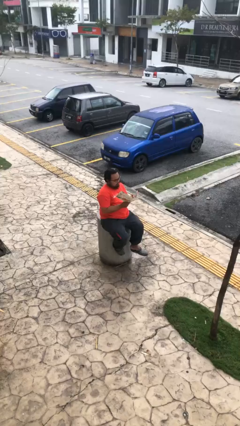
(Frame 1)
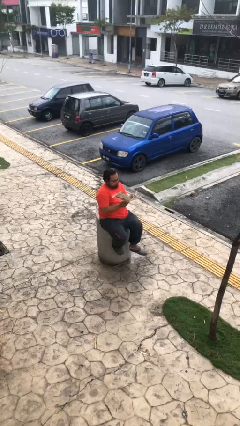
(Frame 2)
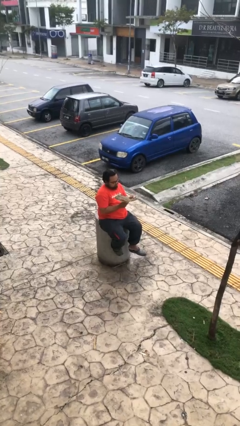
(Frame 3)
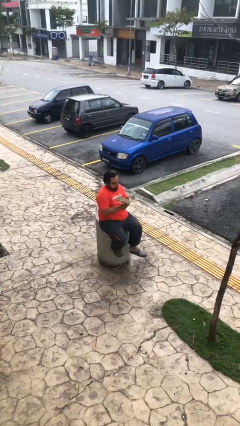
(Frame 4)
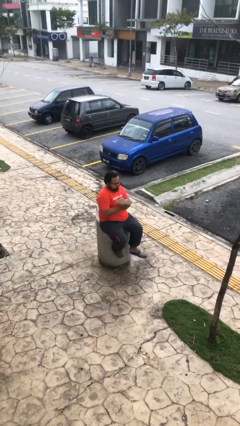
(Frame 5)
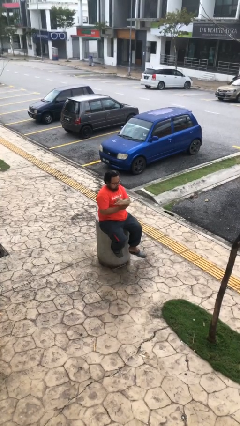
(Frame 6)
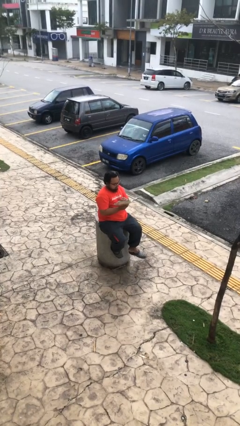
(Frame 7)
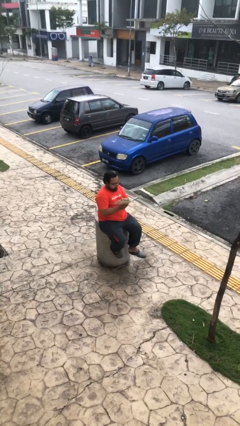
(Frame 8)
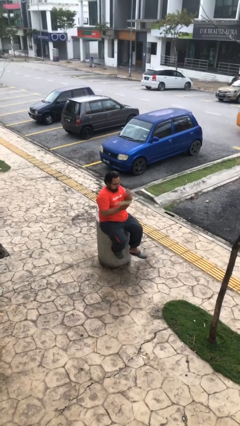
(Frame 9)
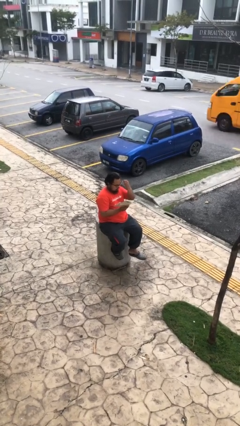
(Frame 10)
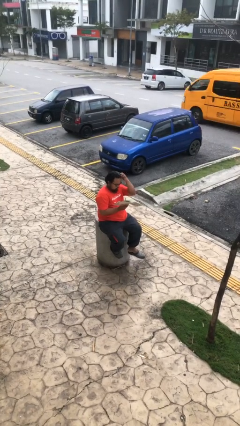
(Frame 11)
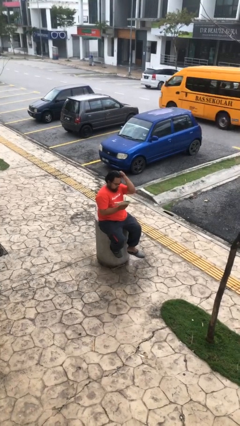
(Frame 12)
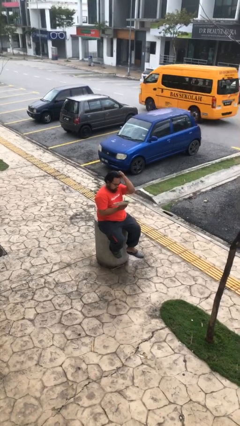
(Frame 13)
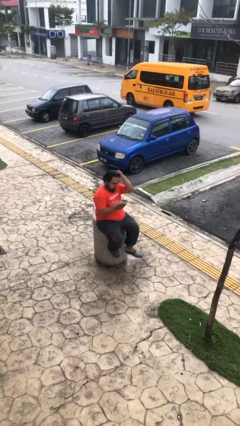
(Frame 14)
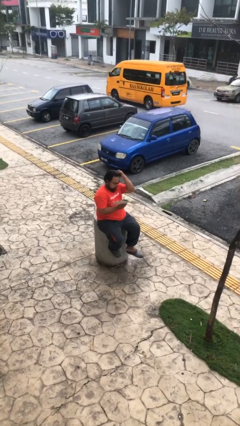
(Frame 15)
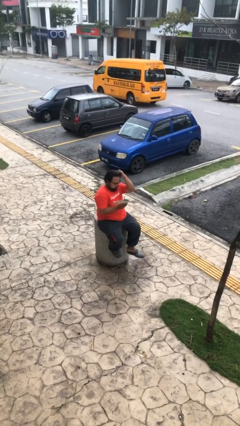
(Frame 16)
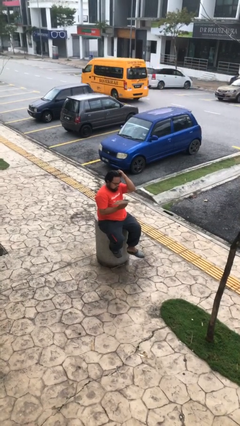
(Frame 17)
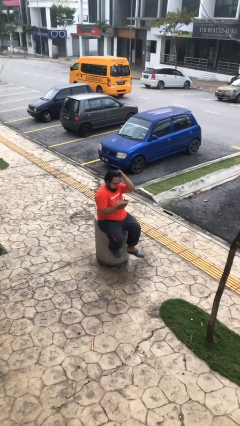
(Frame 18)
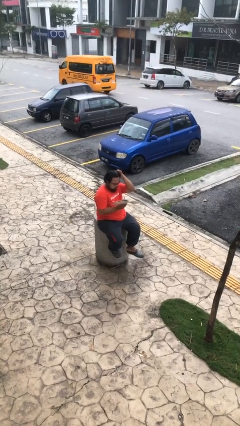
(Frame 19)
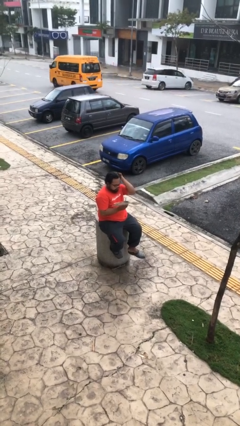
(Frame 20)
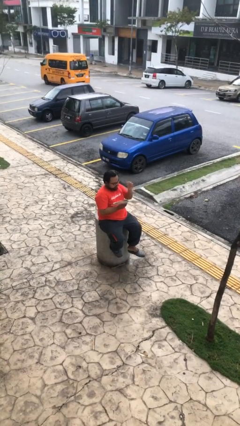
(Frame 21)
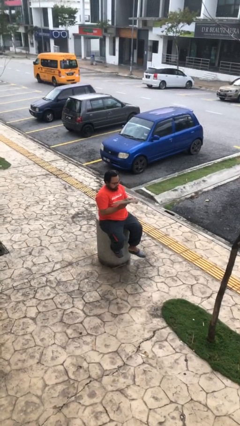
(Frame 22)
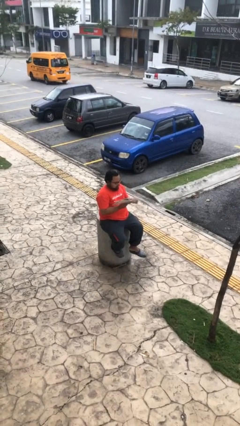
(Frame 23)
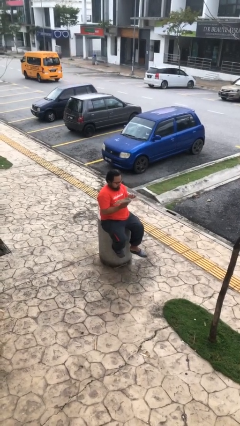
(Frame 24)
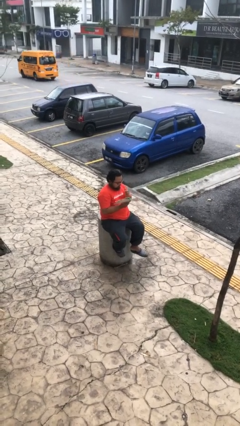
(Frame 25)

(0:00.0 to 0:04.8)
person reads document

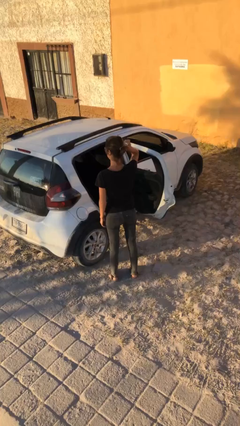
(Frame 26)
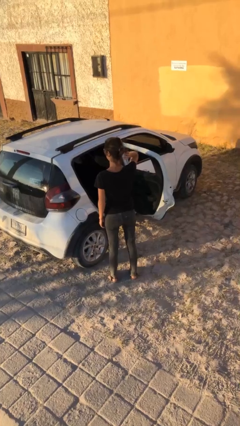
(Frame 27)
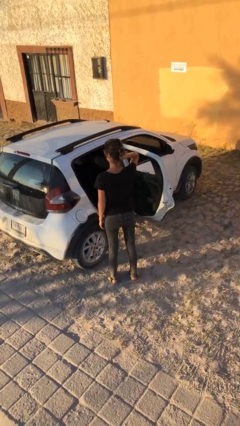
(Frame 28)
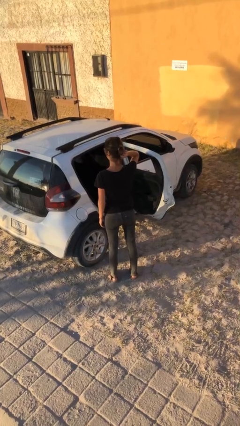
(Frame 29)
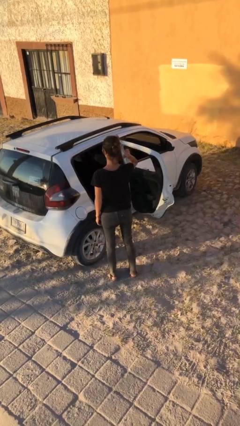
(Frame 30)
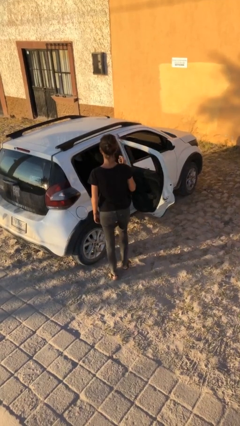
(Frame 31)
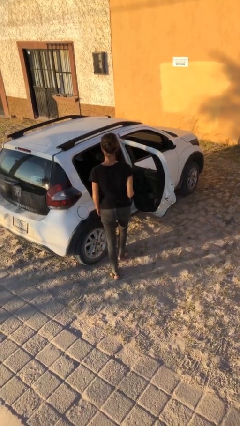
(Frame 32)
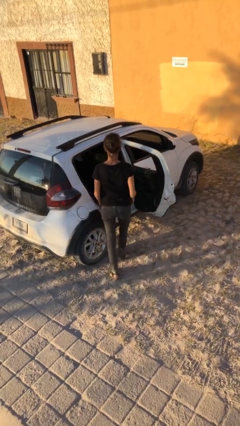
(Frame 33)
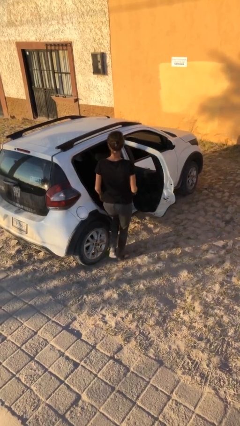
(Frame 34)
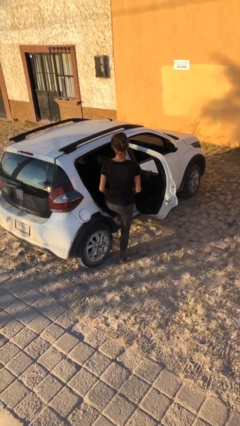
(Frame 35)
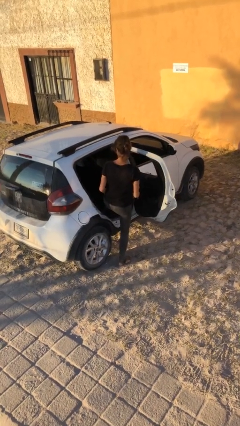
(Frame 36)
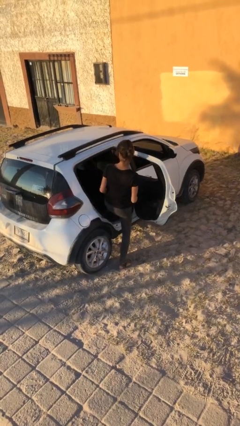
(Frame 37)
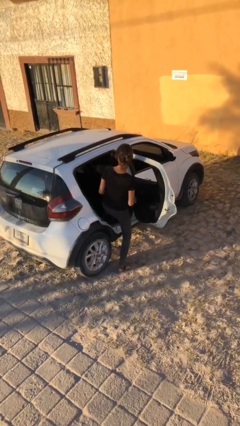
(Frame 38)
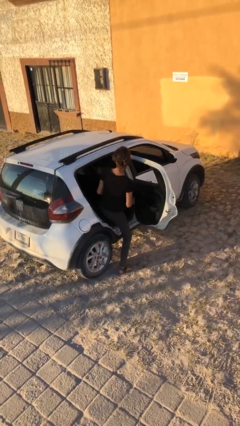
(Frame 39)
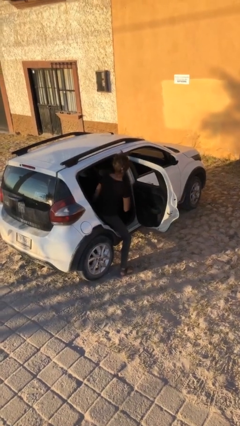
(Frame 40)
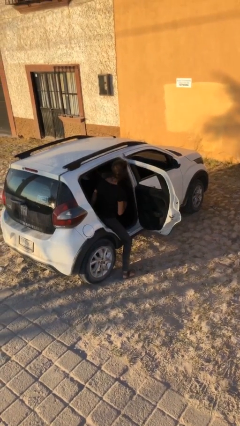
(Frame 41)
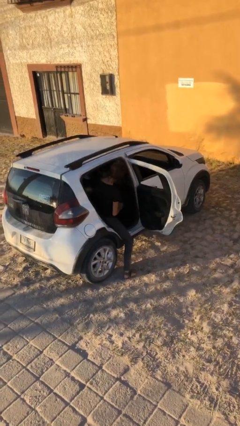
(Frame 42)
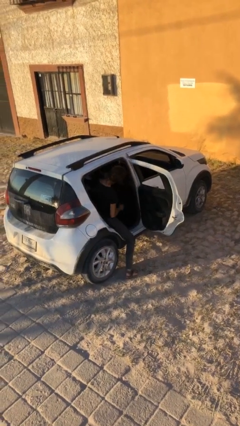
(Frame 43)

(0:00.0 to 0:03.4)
person enters car

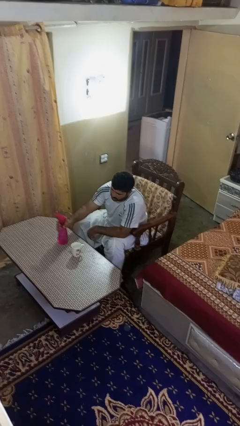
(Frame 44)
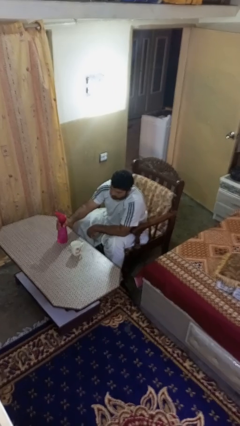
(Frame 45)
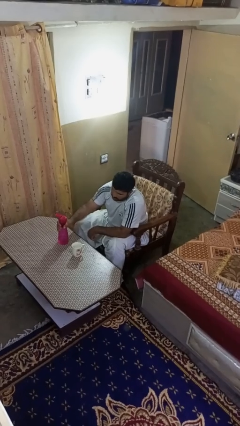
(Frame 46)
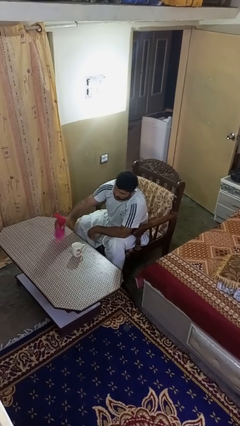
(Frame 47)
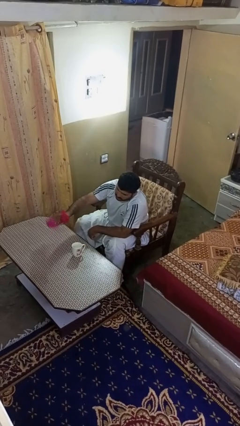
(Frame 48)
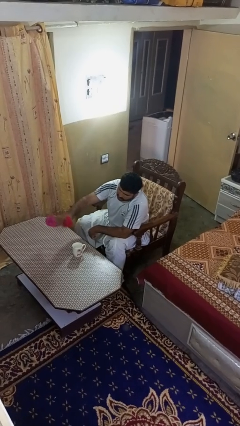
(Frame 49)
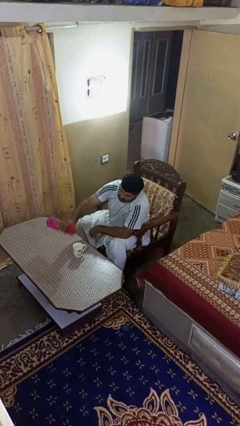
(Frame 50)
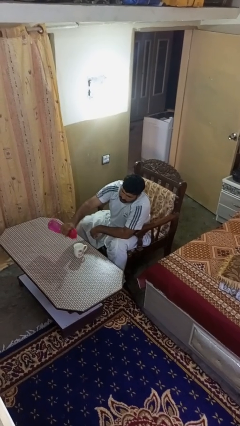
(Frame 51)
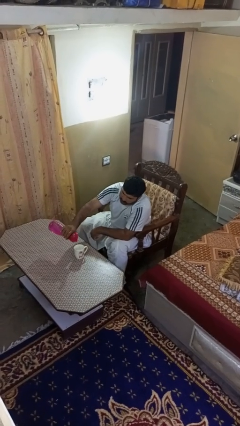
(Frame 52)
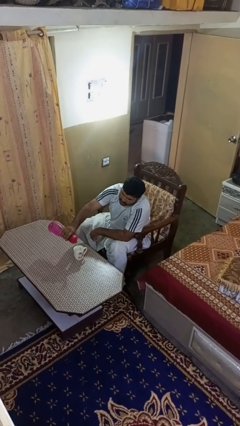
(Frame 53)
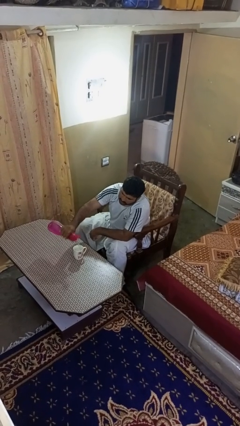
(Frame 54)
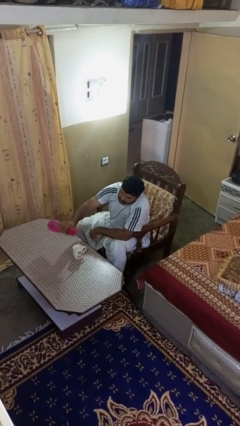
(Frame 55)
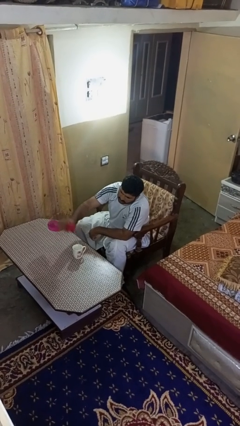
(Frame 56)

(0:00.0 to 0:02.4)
person pours liquid into cup

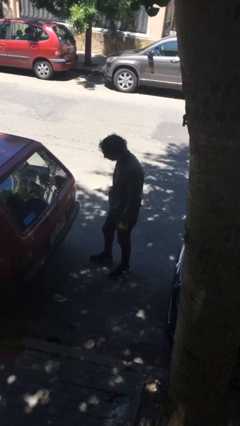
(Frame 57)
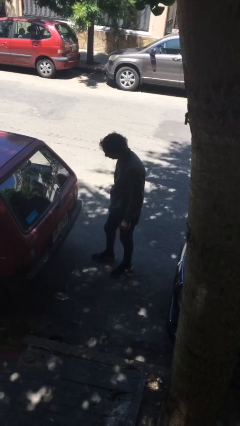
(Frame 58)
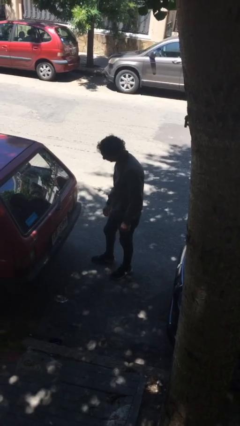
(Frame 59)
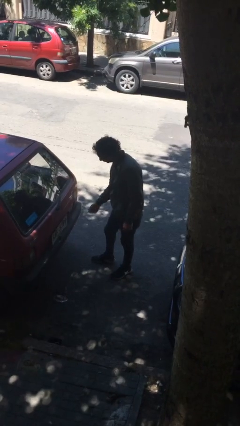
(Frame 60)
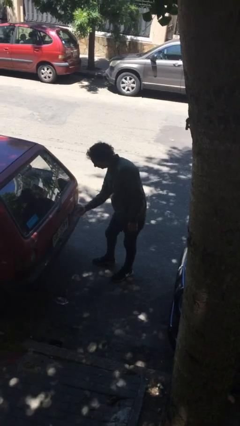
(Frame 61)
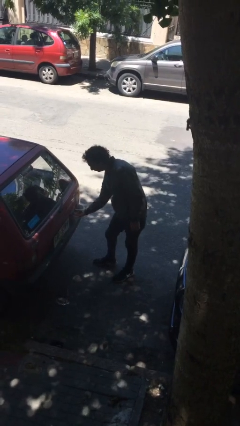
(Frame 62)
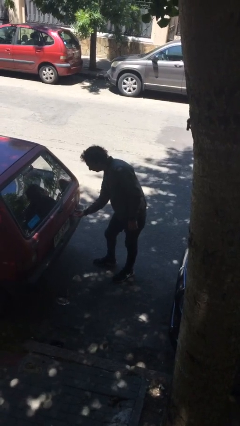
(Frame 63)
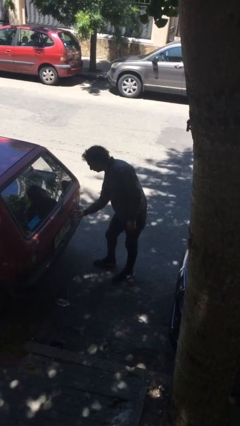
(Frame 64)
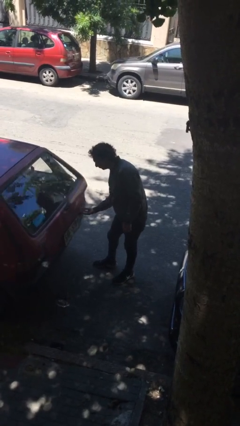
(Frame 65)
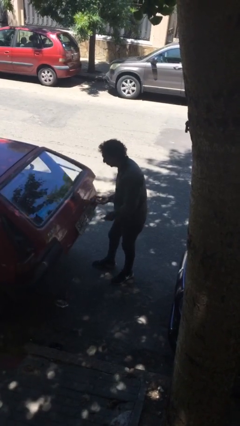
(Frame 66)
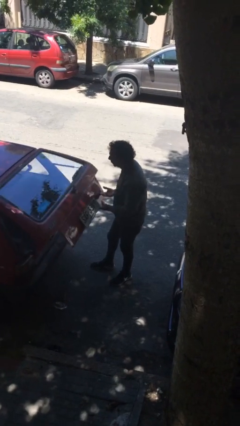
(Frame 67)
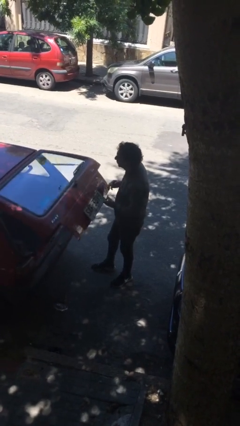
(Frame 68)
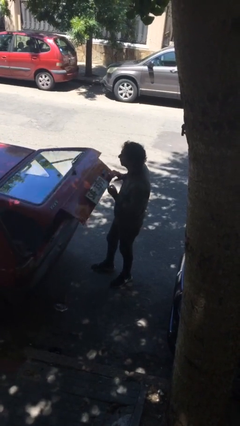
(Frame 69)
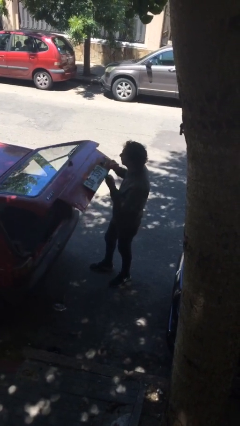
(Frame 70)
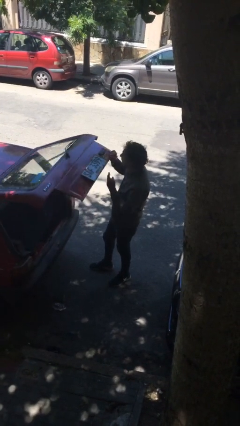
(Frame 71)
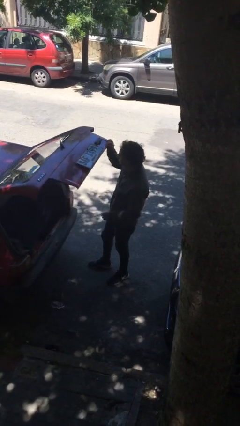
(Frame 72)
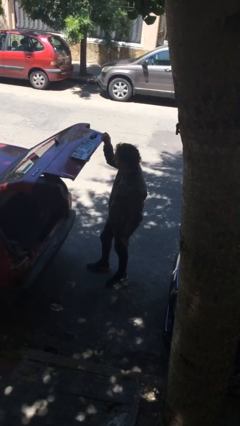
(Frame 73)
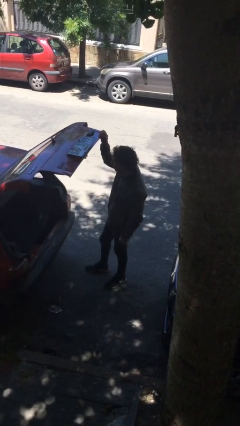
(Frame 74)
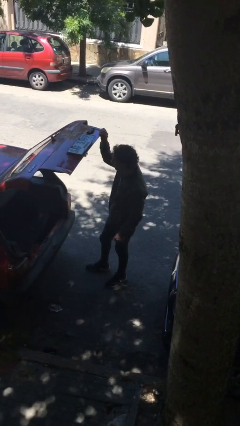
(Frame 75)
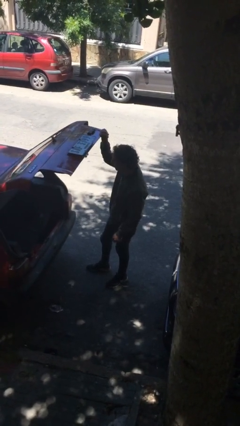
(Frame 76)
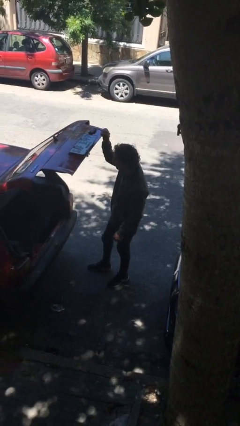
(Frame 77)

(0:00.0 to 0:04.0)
person opens car trunk

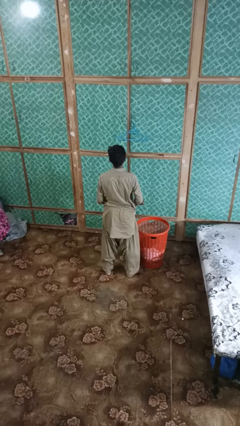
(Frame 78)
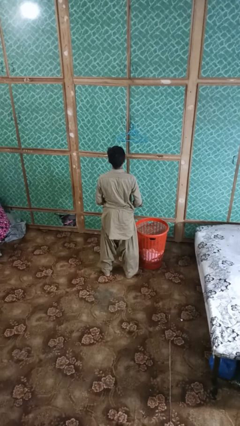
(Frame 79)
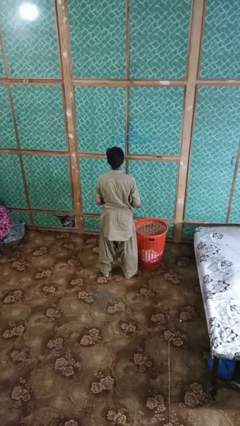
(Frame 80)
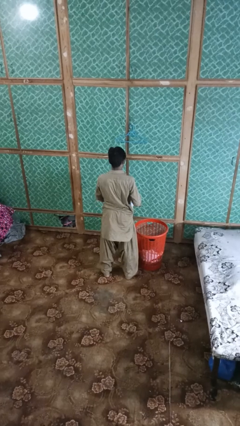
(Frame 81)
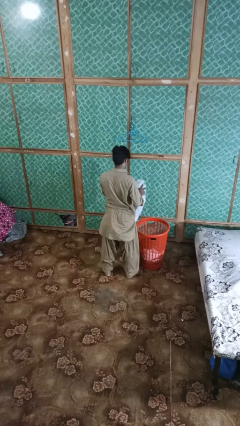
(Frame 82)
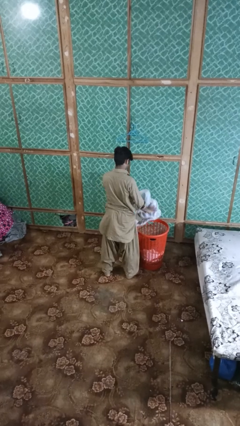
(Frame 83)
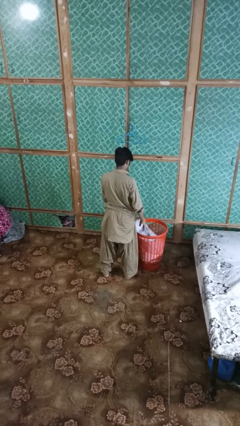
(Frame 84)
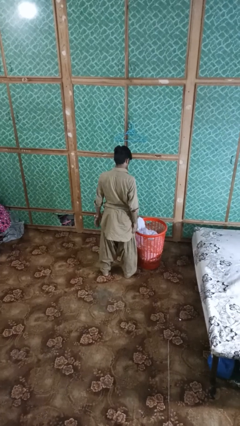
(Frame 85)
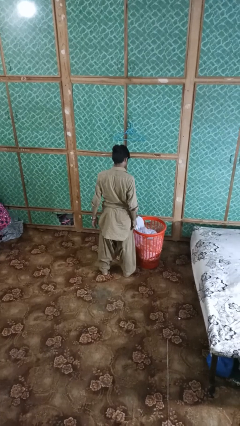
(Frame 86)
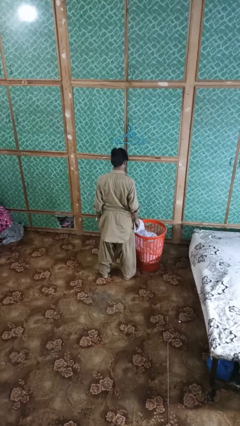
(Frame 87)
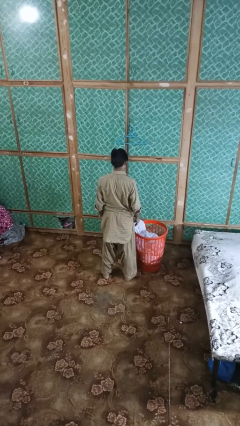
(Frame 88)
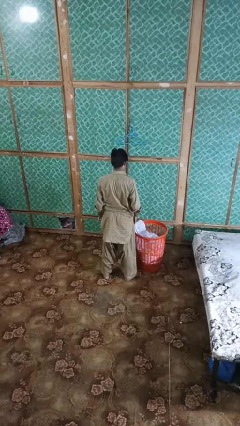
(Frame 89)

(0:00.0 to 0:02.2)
person puts object into basket

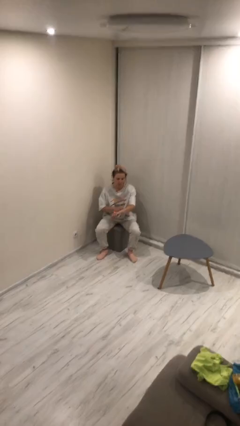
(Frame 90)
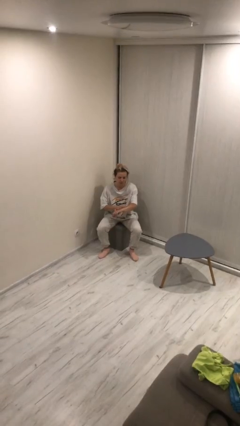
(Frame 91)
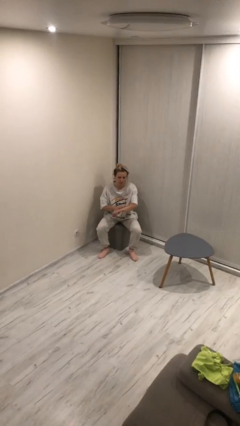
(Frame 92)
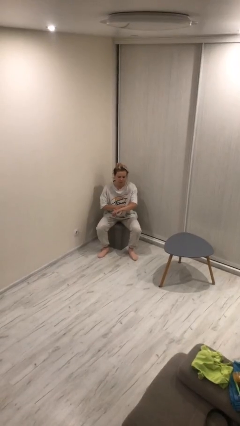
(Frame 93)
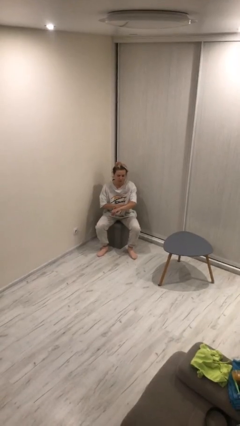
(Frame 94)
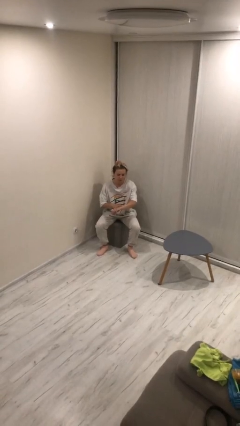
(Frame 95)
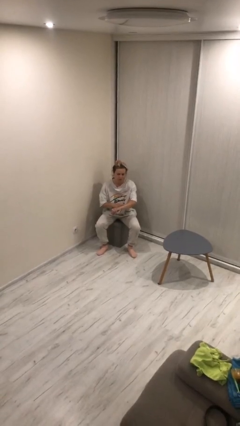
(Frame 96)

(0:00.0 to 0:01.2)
person applies sunscreen
